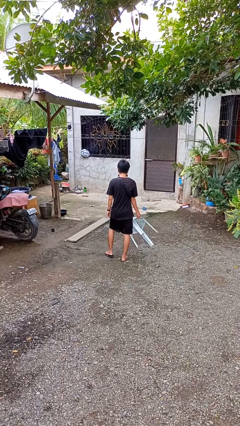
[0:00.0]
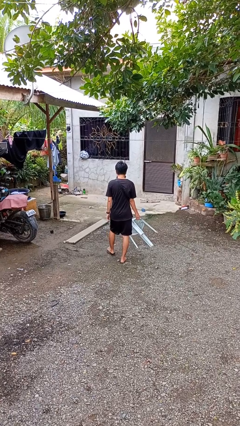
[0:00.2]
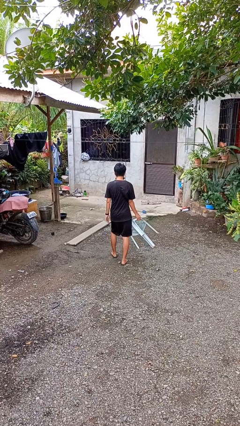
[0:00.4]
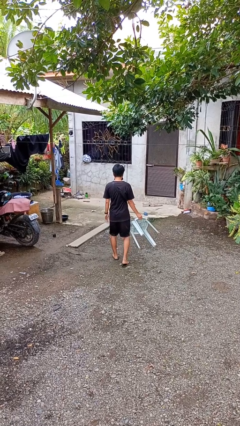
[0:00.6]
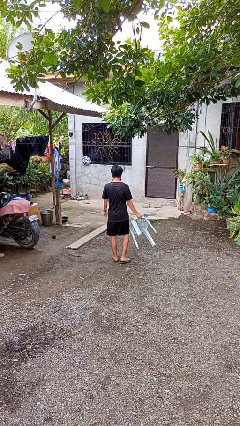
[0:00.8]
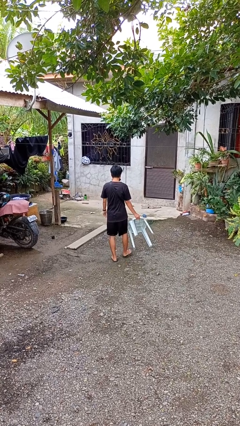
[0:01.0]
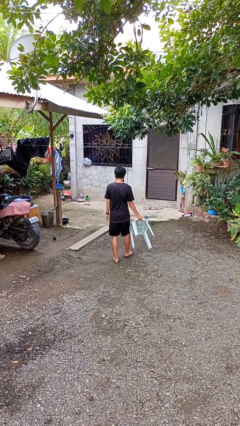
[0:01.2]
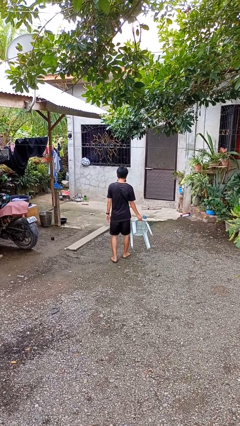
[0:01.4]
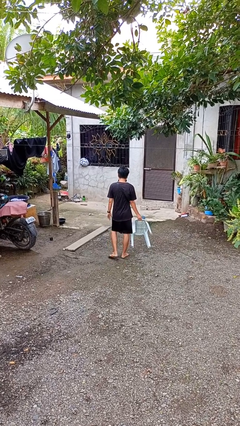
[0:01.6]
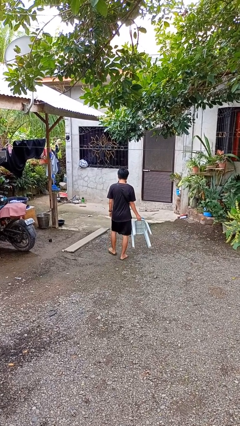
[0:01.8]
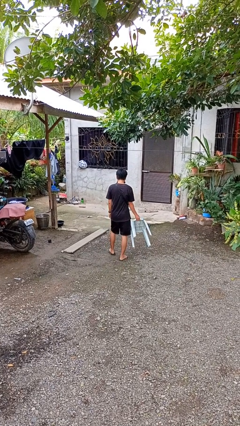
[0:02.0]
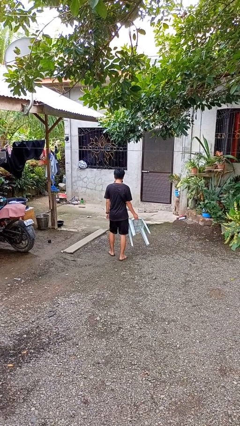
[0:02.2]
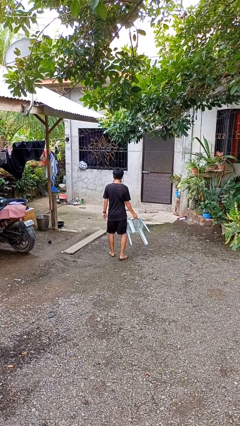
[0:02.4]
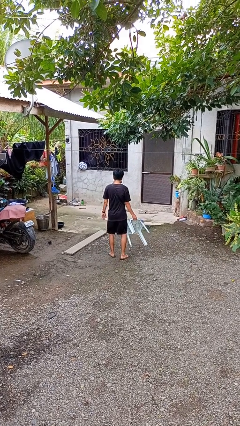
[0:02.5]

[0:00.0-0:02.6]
person carries furniture

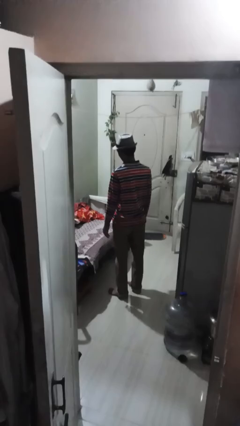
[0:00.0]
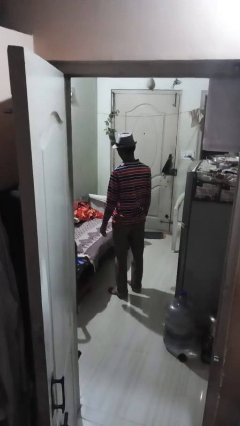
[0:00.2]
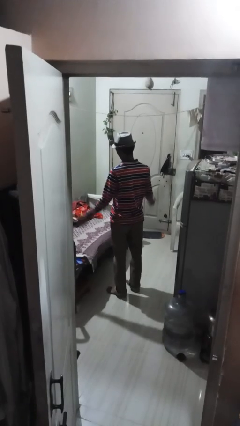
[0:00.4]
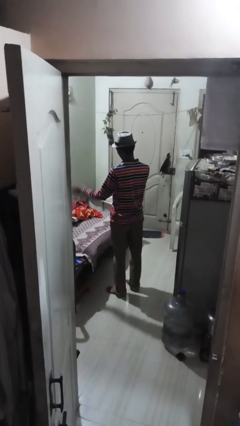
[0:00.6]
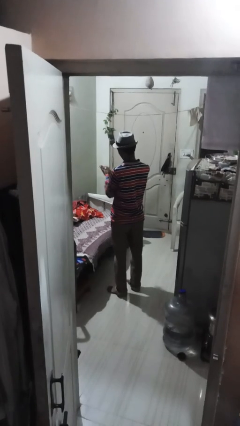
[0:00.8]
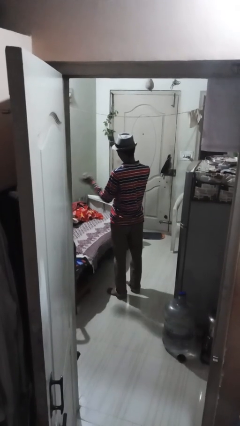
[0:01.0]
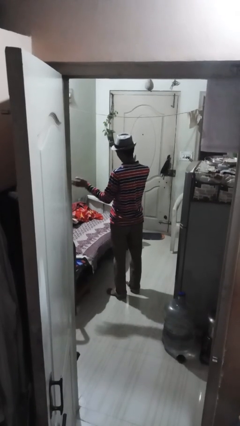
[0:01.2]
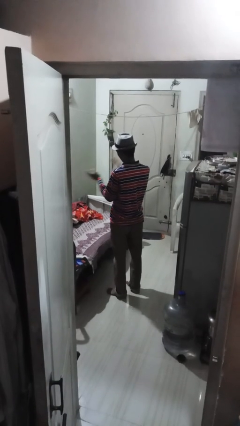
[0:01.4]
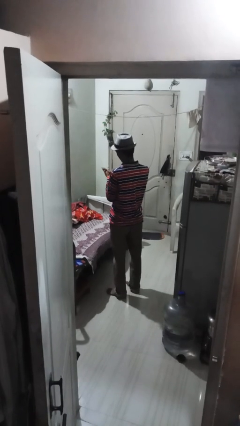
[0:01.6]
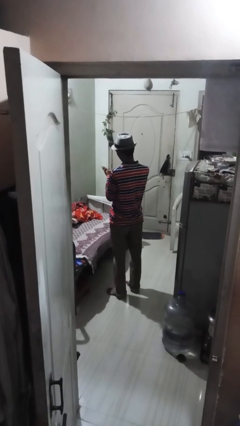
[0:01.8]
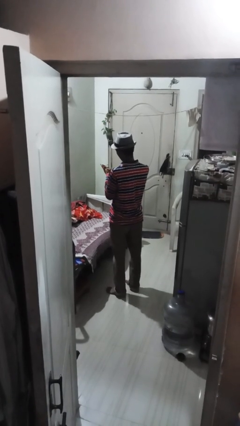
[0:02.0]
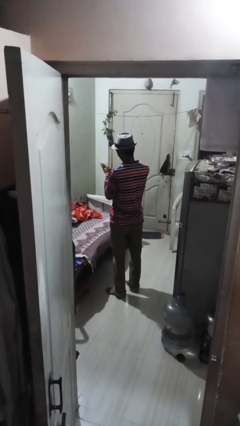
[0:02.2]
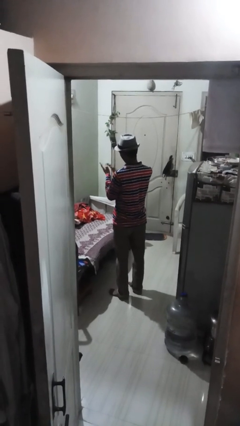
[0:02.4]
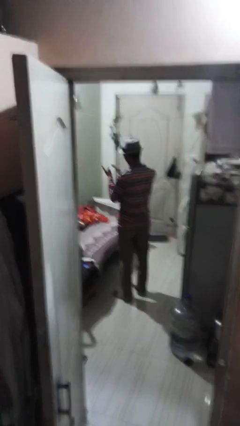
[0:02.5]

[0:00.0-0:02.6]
person claps hands

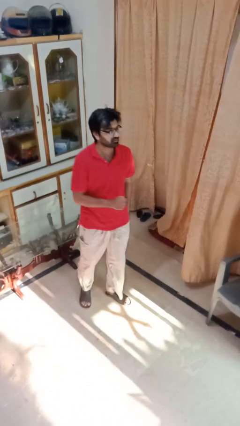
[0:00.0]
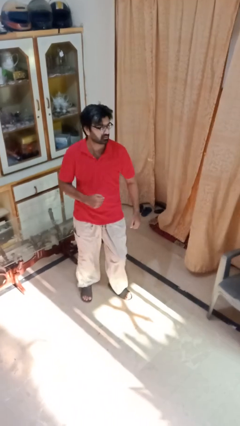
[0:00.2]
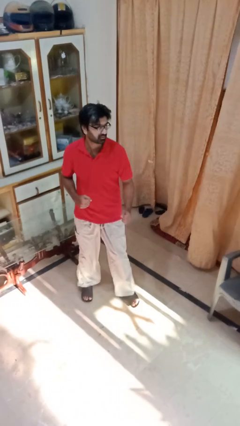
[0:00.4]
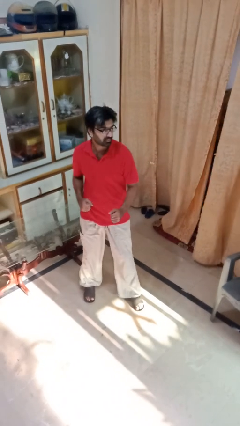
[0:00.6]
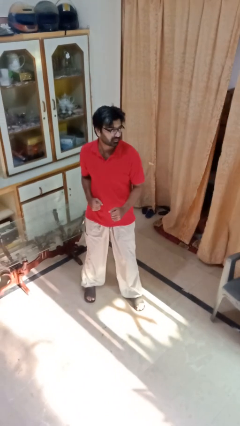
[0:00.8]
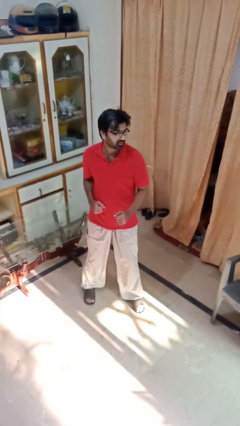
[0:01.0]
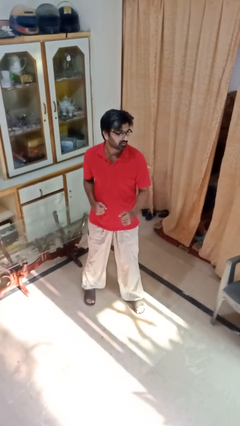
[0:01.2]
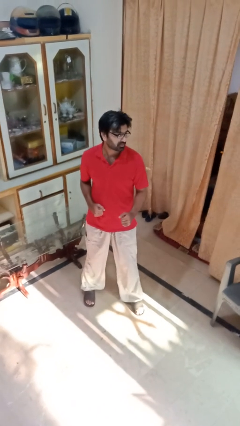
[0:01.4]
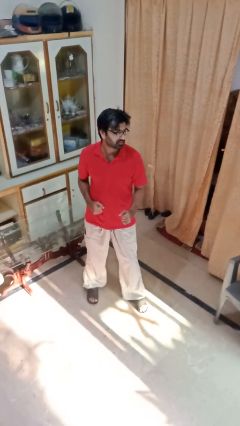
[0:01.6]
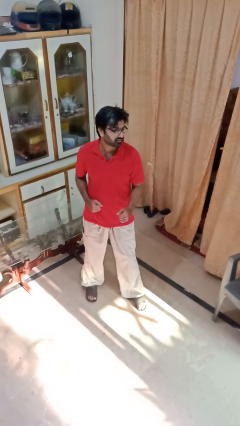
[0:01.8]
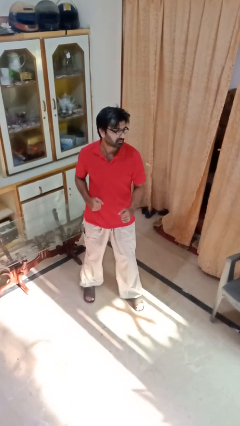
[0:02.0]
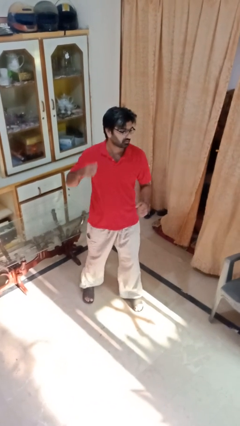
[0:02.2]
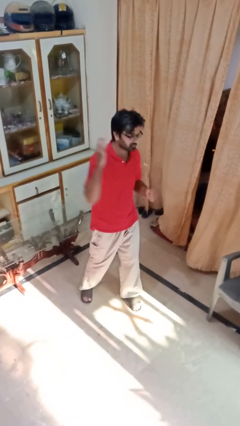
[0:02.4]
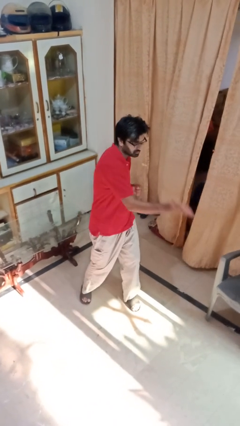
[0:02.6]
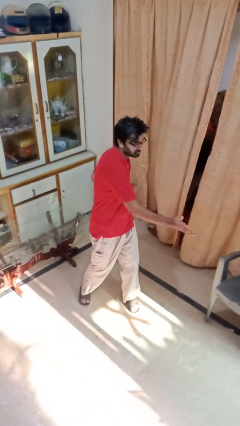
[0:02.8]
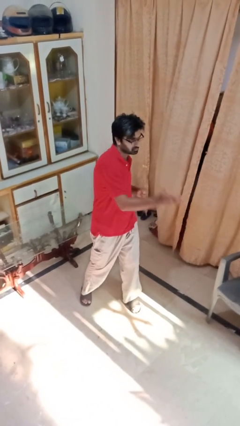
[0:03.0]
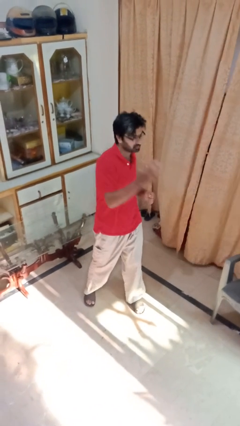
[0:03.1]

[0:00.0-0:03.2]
person karate chop

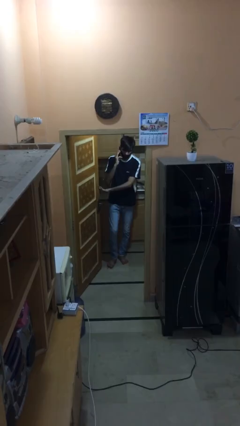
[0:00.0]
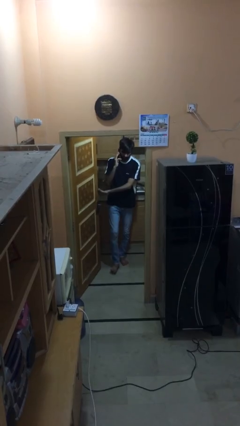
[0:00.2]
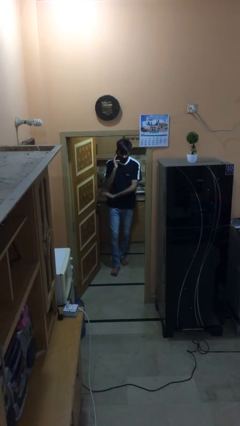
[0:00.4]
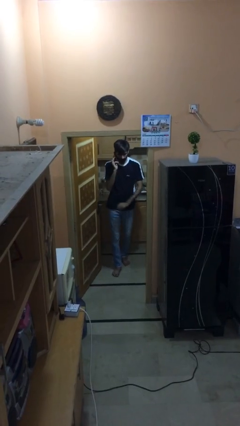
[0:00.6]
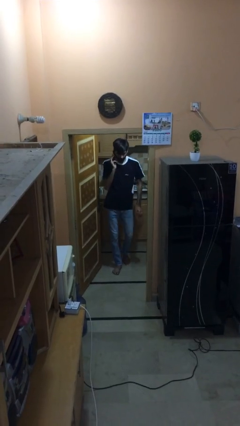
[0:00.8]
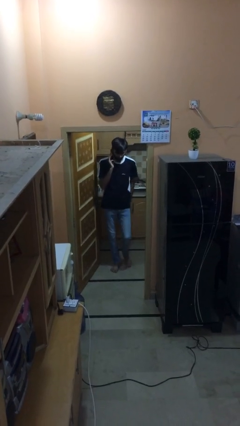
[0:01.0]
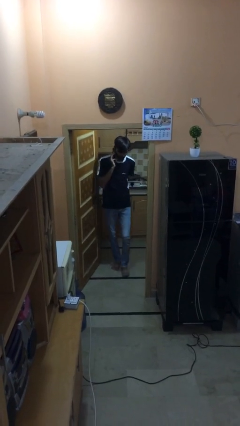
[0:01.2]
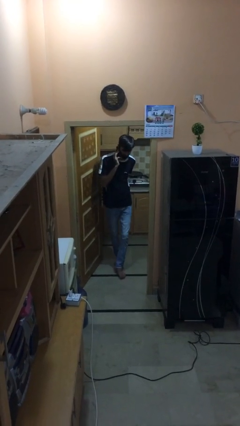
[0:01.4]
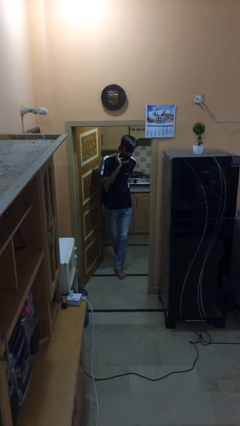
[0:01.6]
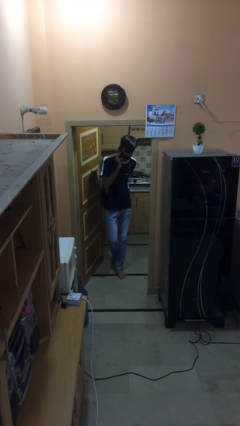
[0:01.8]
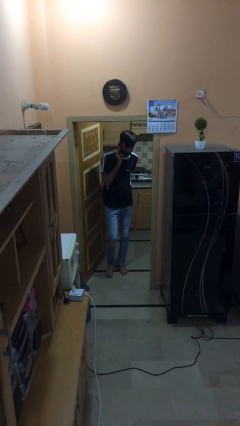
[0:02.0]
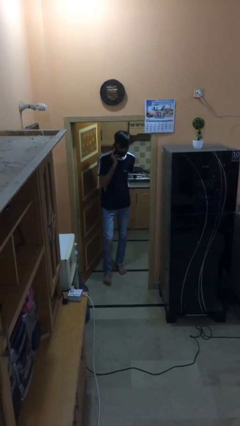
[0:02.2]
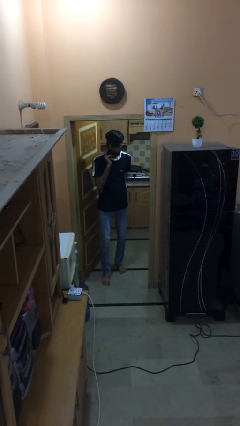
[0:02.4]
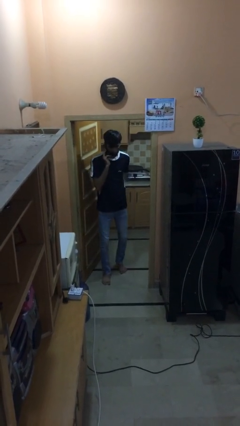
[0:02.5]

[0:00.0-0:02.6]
person enters scene through structure

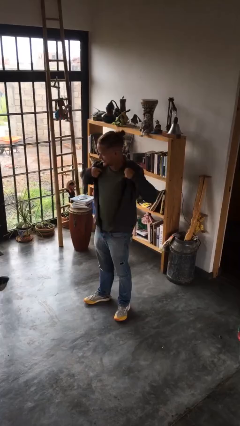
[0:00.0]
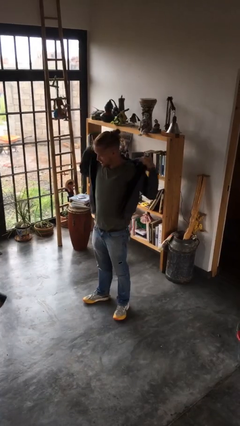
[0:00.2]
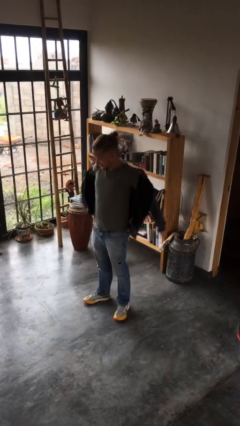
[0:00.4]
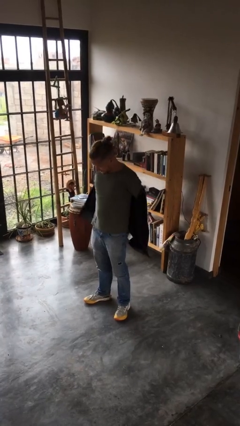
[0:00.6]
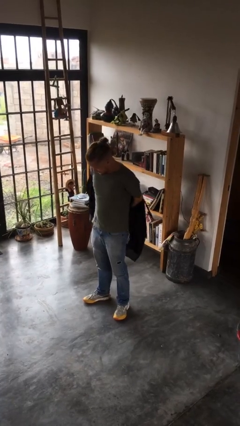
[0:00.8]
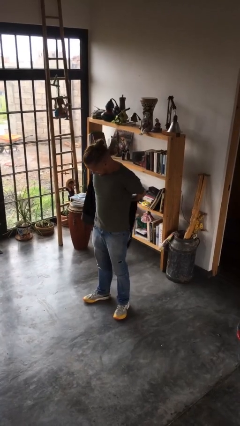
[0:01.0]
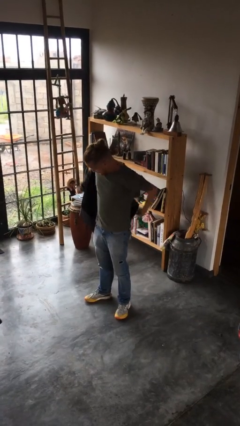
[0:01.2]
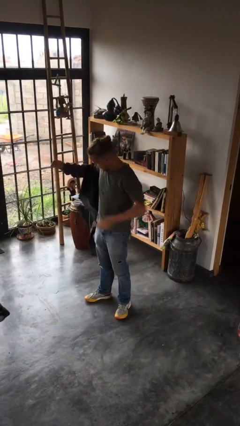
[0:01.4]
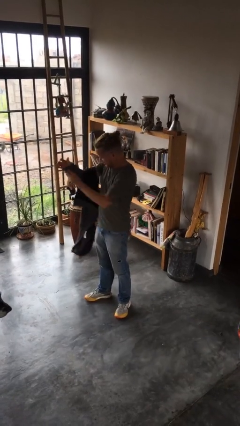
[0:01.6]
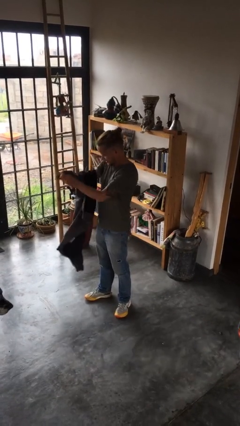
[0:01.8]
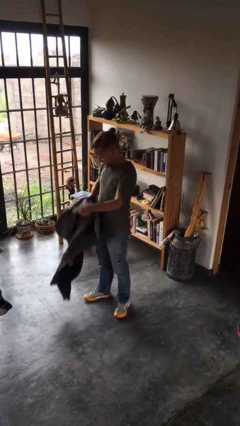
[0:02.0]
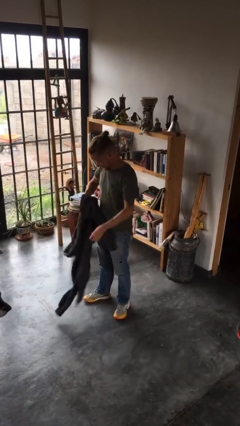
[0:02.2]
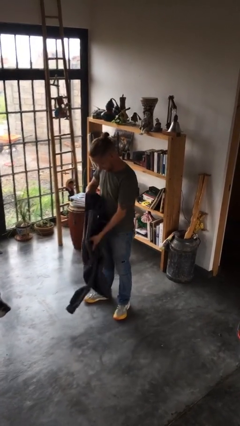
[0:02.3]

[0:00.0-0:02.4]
person takes off jacket

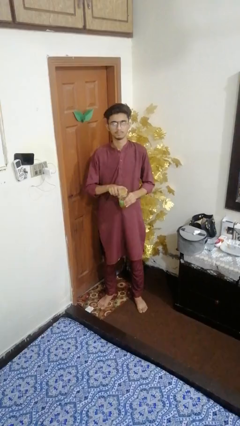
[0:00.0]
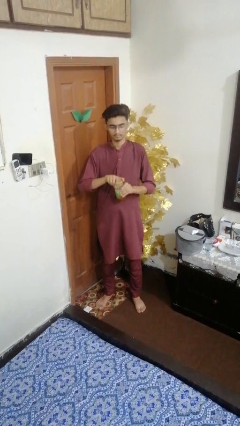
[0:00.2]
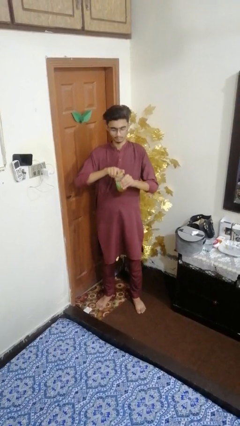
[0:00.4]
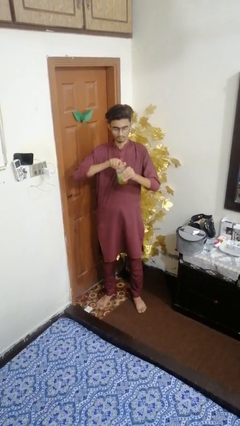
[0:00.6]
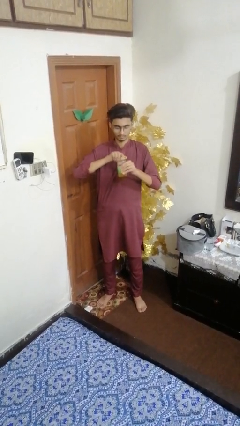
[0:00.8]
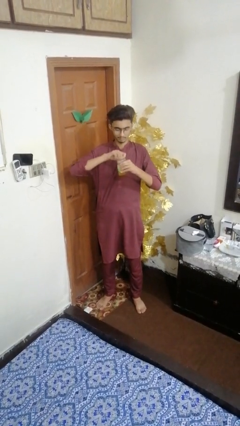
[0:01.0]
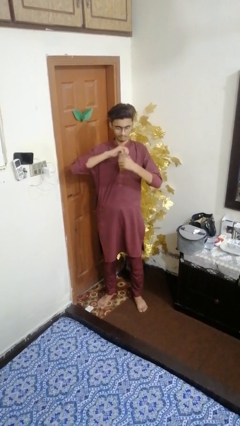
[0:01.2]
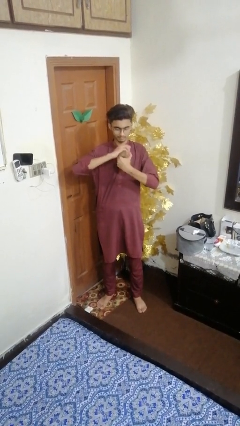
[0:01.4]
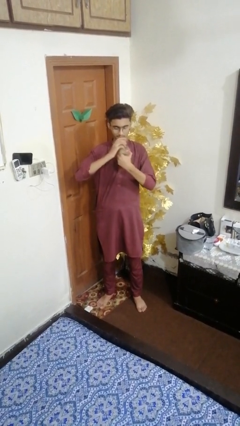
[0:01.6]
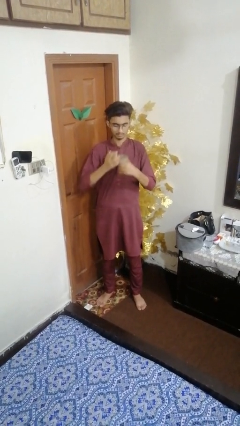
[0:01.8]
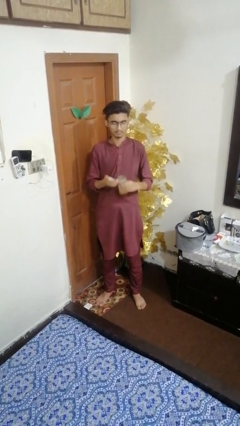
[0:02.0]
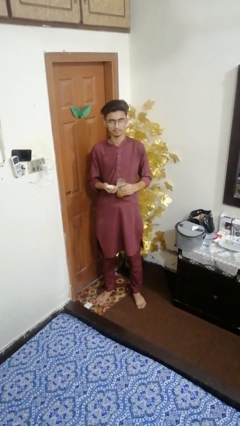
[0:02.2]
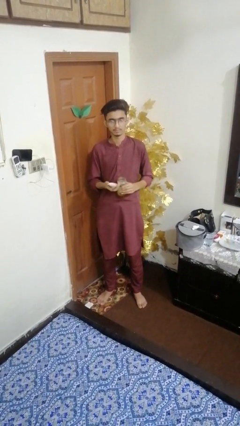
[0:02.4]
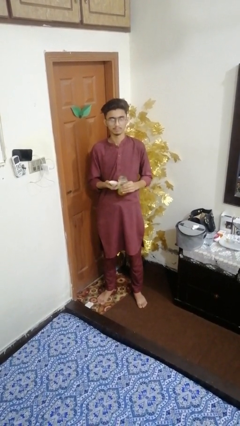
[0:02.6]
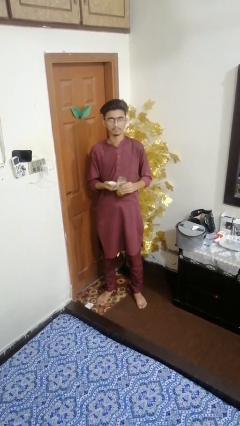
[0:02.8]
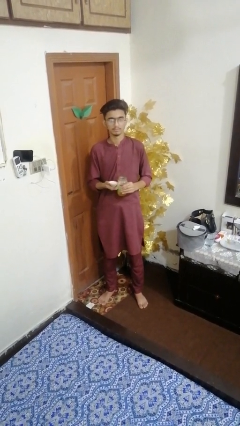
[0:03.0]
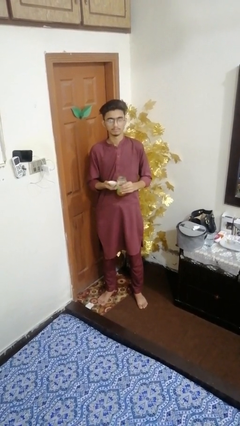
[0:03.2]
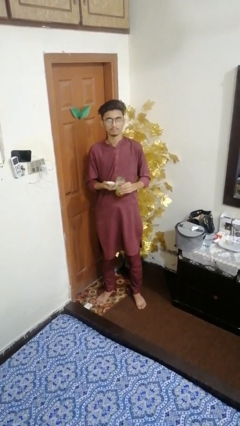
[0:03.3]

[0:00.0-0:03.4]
person opens jar

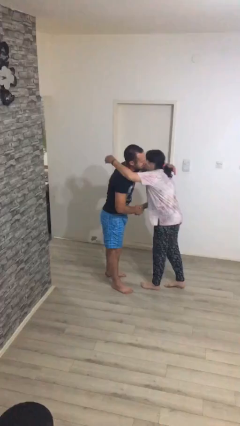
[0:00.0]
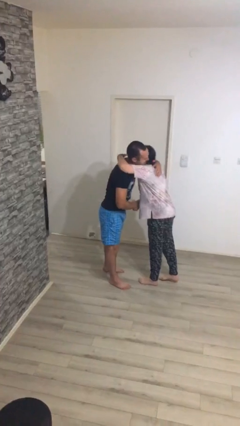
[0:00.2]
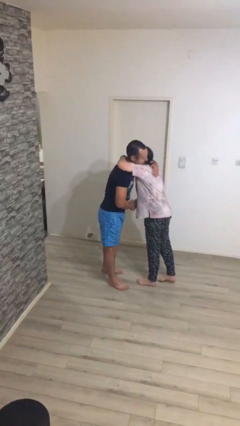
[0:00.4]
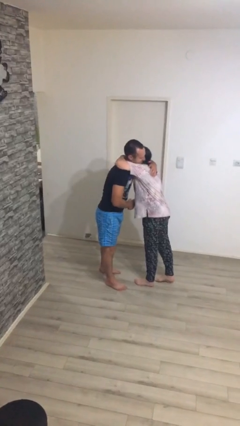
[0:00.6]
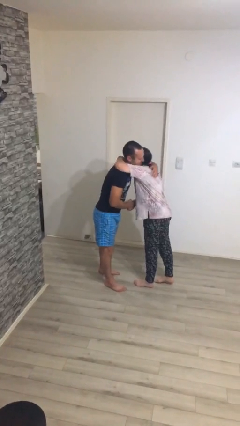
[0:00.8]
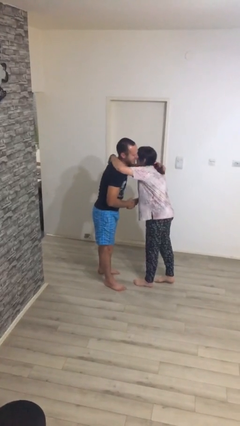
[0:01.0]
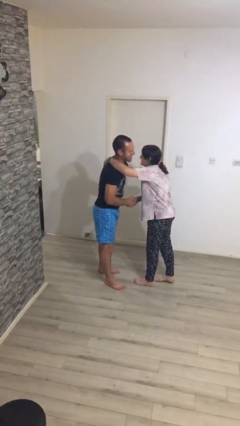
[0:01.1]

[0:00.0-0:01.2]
person embraces person
